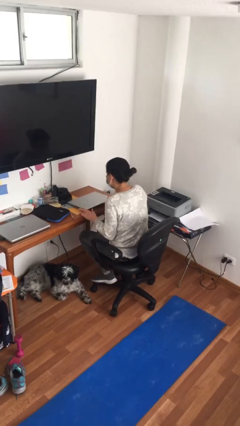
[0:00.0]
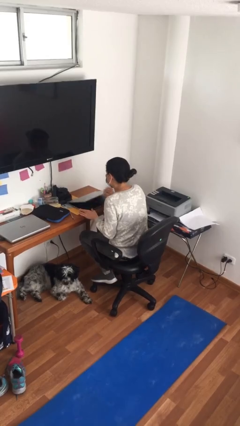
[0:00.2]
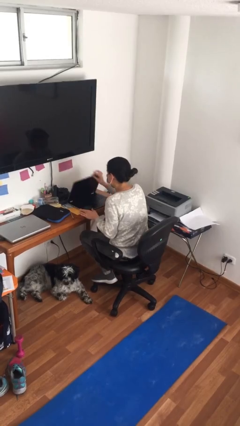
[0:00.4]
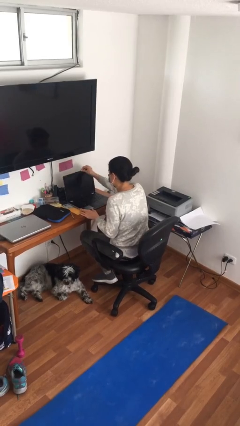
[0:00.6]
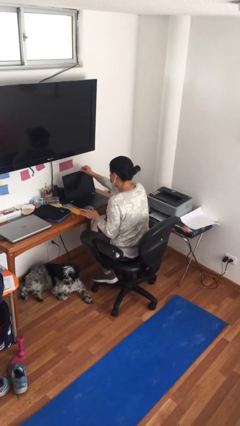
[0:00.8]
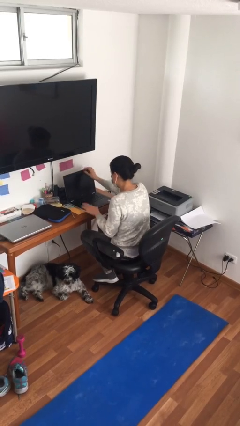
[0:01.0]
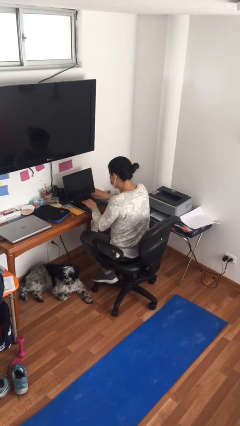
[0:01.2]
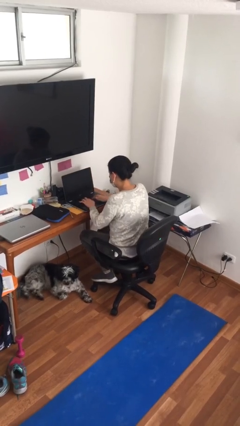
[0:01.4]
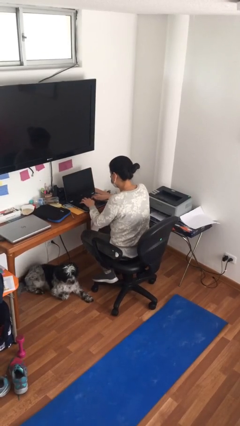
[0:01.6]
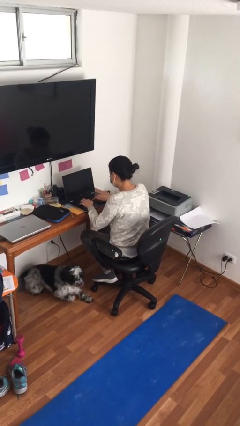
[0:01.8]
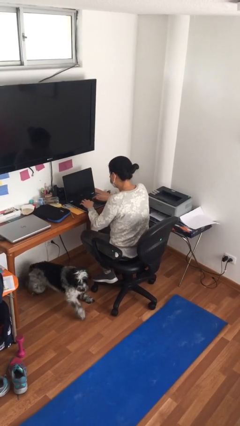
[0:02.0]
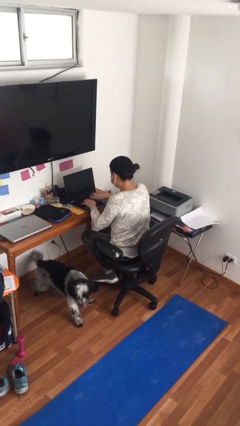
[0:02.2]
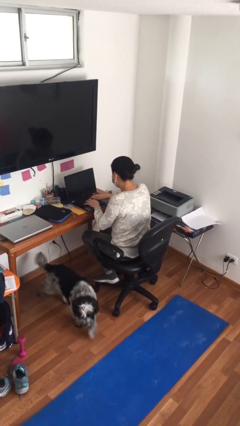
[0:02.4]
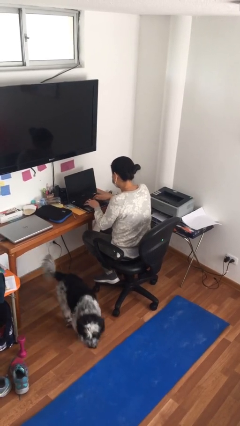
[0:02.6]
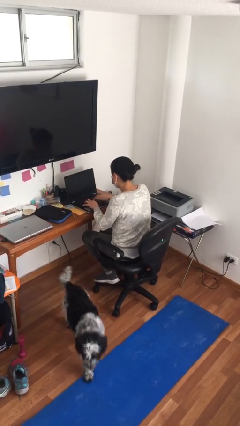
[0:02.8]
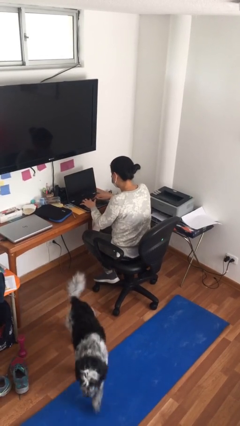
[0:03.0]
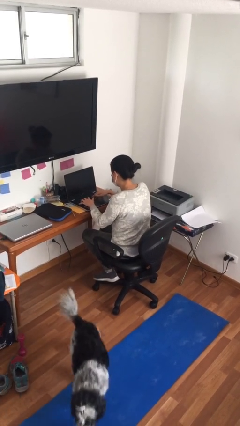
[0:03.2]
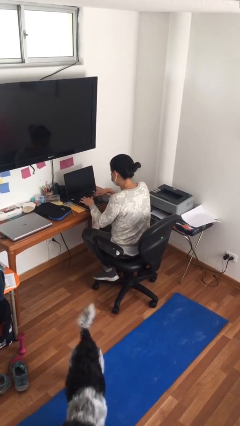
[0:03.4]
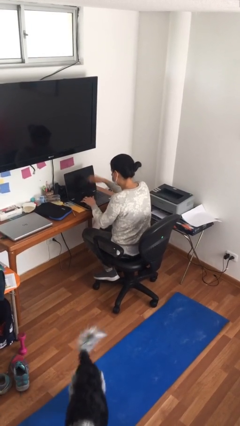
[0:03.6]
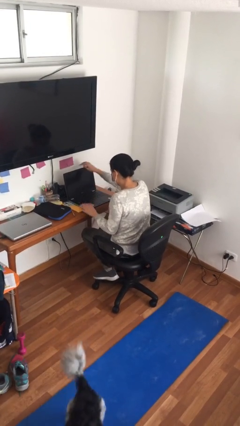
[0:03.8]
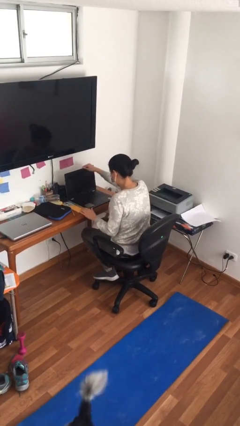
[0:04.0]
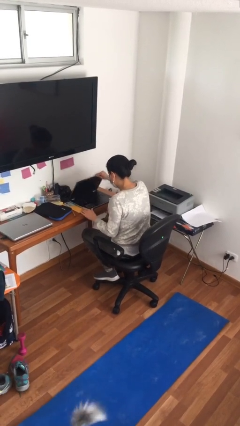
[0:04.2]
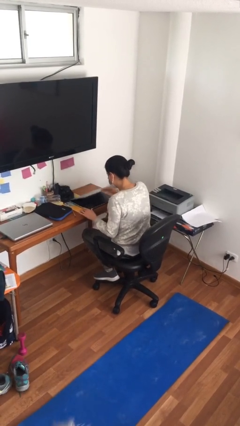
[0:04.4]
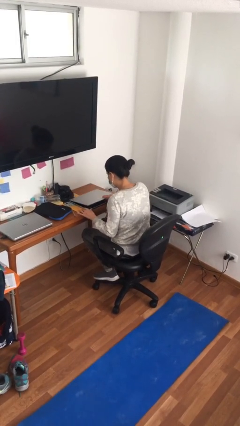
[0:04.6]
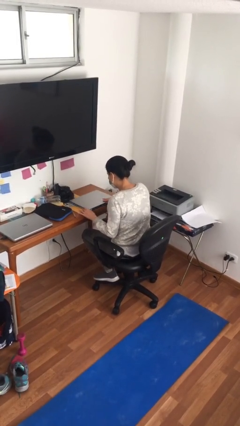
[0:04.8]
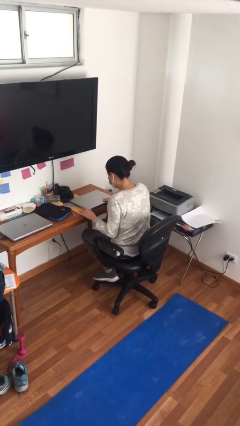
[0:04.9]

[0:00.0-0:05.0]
person interacts with laptop

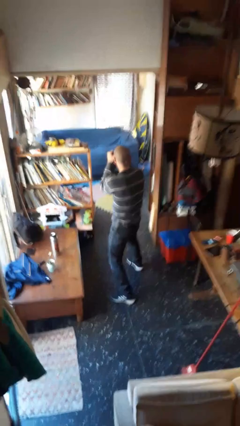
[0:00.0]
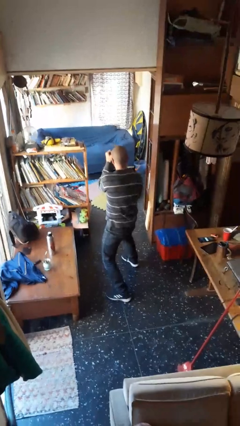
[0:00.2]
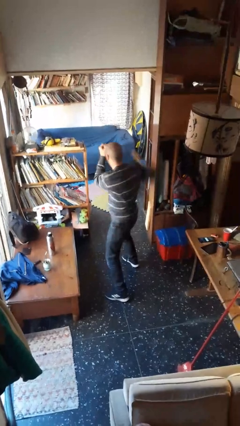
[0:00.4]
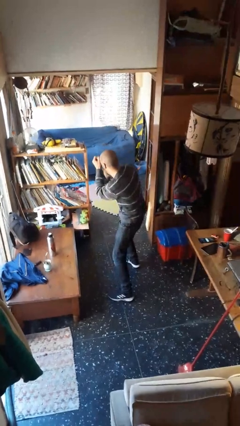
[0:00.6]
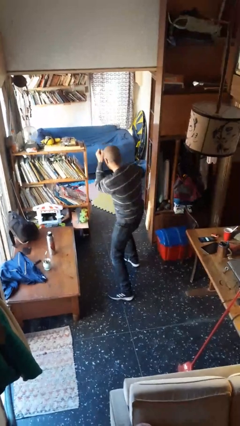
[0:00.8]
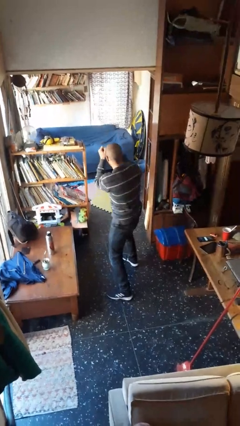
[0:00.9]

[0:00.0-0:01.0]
person punches

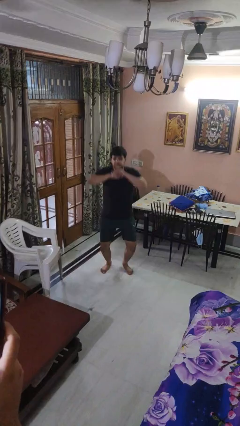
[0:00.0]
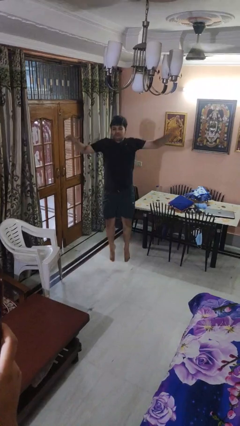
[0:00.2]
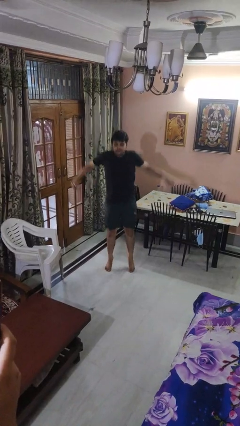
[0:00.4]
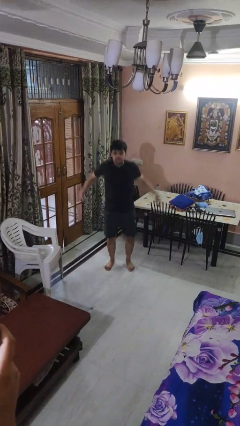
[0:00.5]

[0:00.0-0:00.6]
person jumps

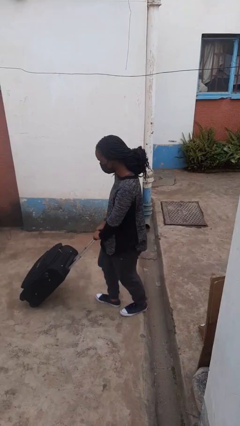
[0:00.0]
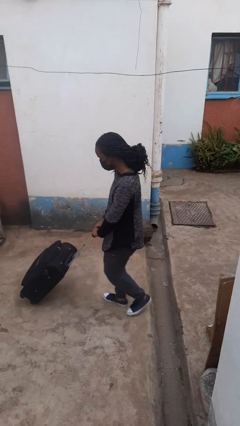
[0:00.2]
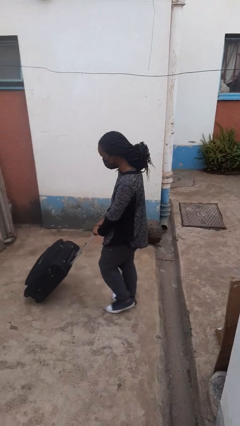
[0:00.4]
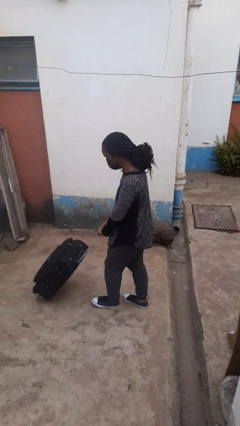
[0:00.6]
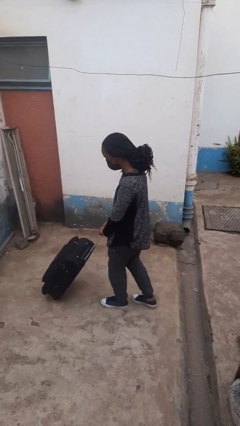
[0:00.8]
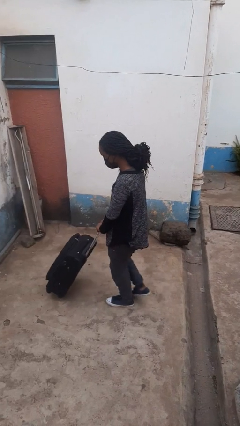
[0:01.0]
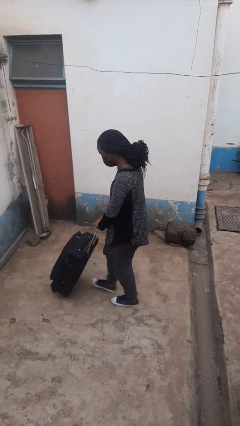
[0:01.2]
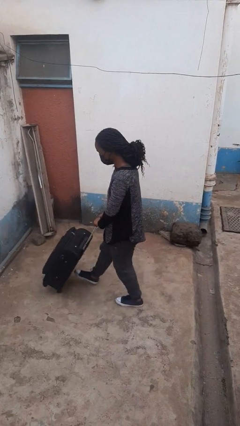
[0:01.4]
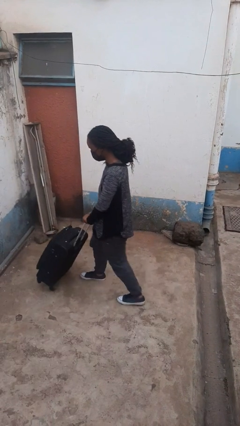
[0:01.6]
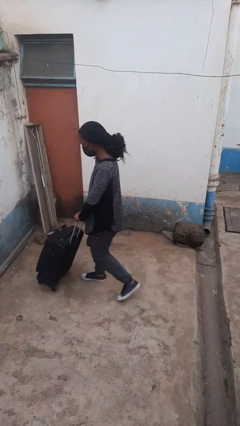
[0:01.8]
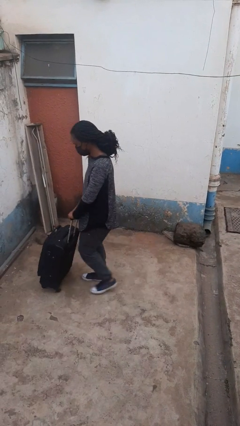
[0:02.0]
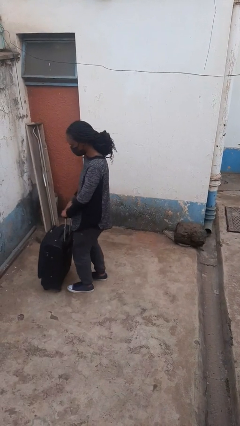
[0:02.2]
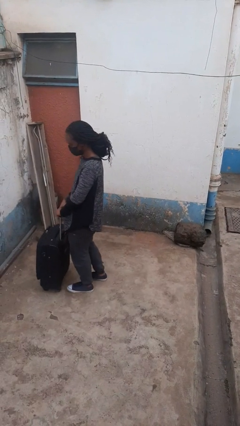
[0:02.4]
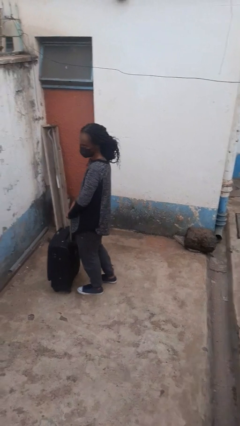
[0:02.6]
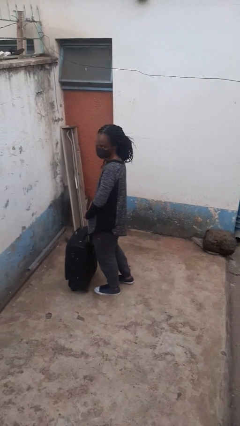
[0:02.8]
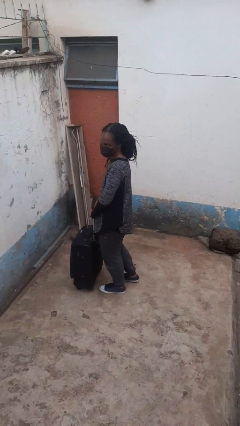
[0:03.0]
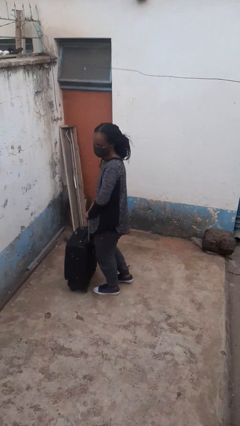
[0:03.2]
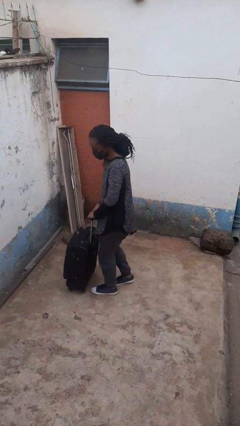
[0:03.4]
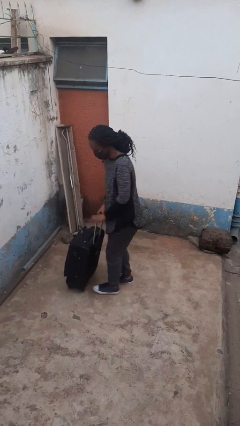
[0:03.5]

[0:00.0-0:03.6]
person pushes wheeled cart

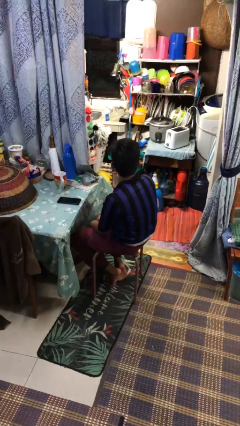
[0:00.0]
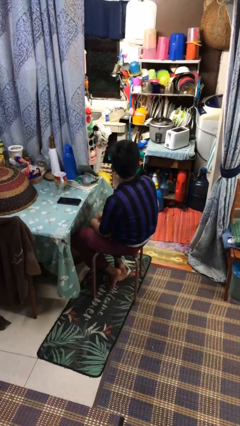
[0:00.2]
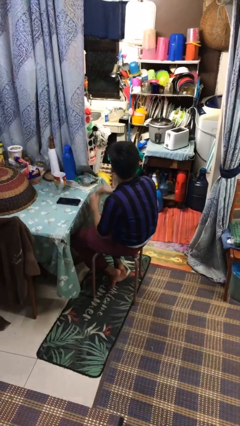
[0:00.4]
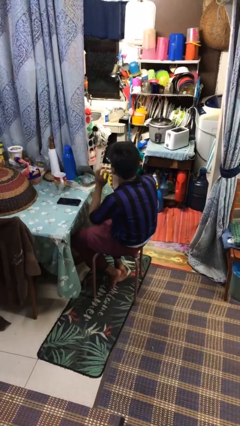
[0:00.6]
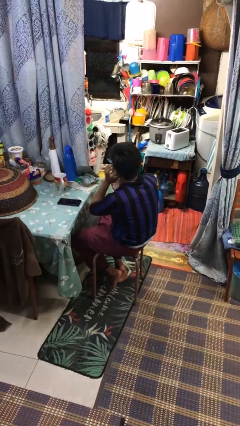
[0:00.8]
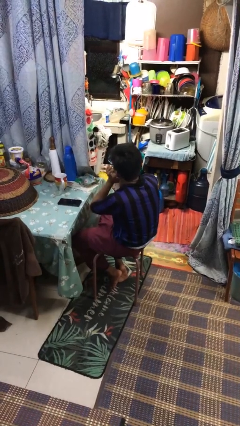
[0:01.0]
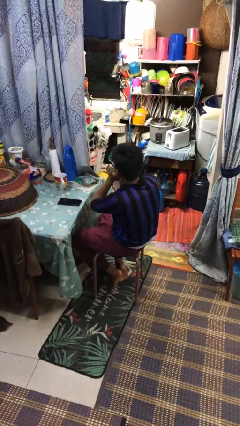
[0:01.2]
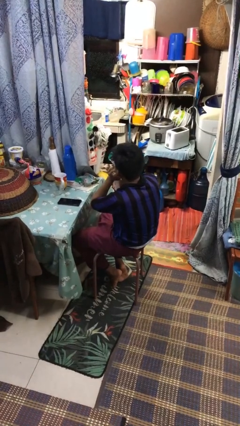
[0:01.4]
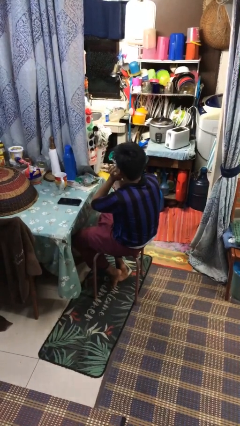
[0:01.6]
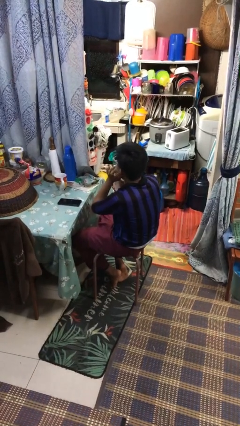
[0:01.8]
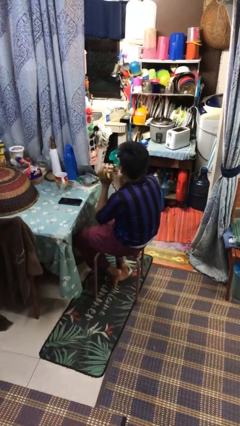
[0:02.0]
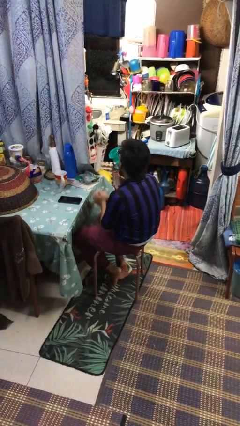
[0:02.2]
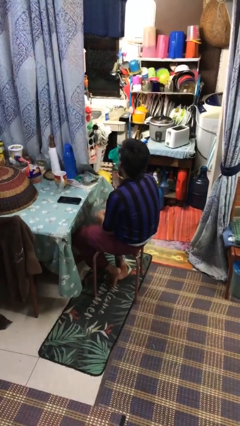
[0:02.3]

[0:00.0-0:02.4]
person puts fingers in ear

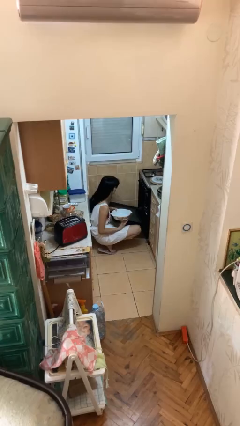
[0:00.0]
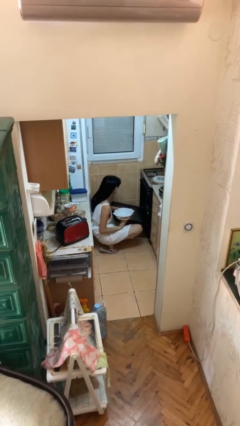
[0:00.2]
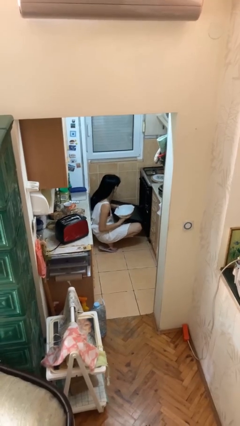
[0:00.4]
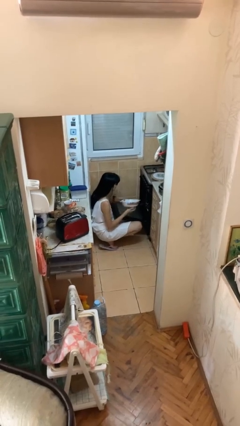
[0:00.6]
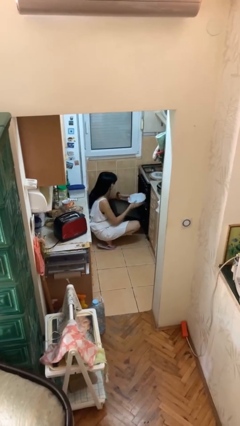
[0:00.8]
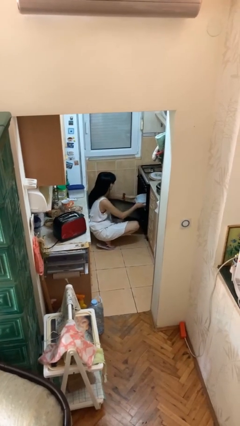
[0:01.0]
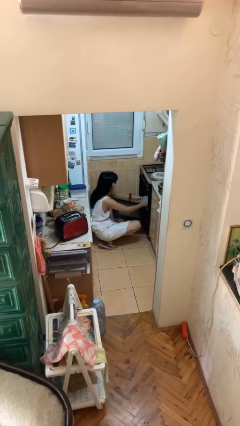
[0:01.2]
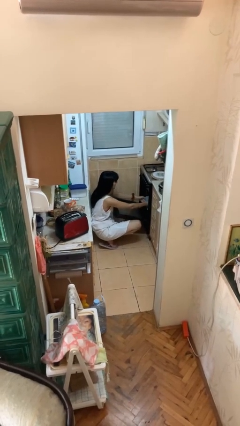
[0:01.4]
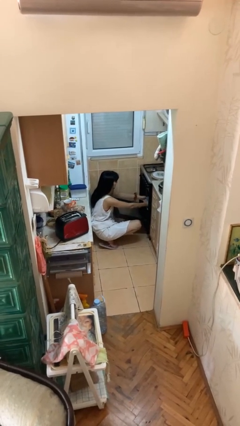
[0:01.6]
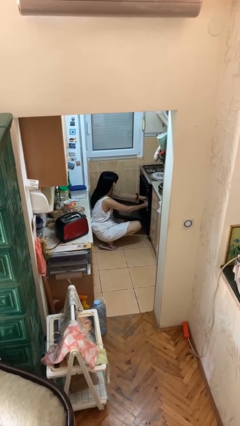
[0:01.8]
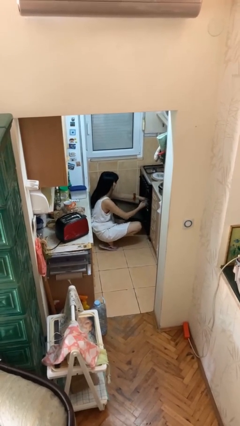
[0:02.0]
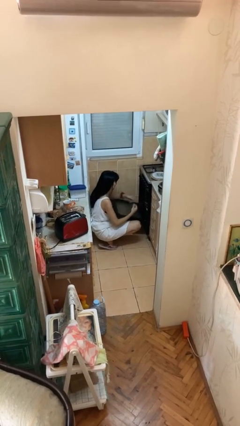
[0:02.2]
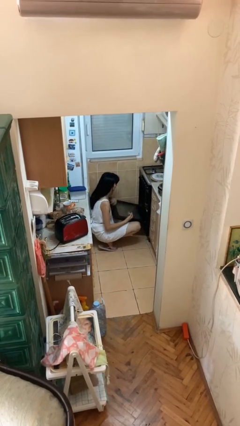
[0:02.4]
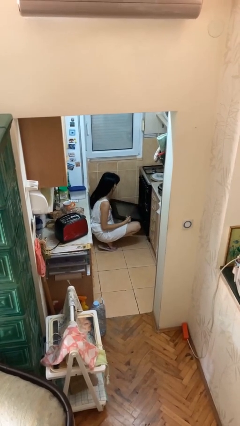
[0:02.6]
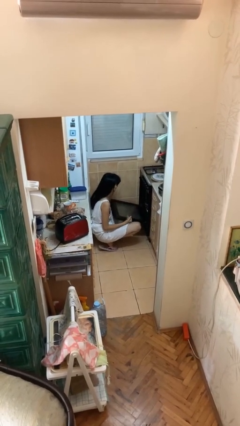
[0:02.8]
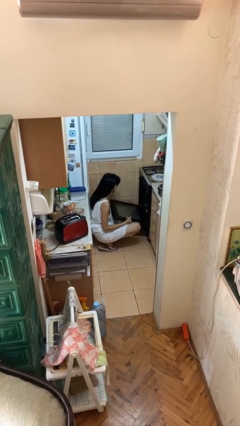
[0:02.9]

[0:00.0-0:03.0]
person puts object into oven

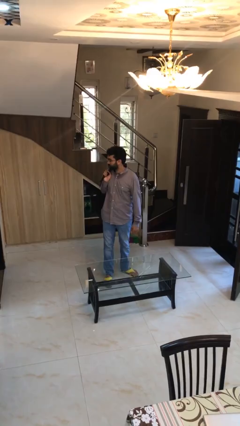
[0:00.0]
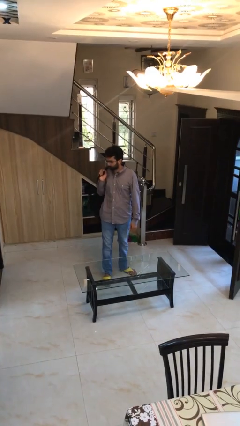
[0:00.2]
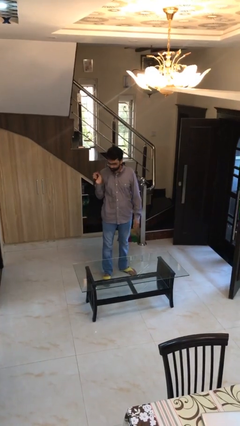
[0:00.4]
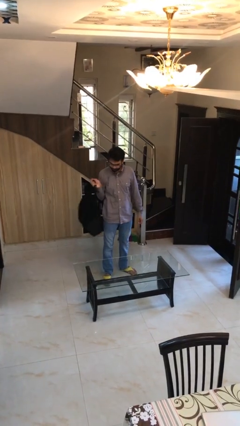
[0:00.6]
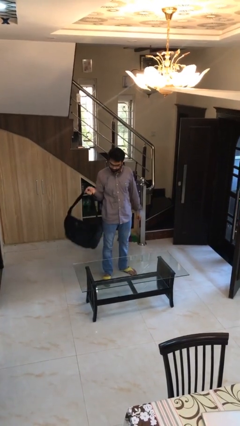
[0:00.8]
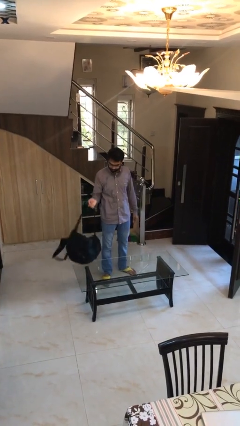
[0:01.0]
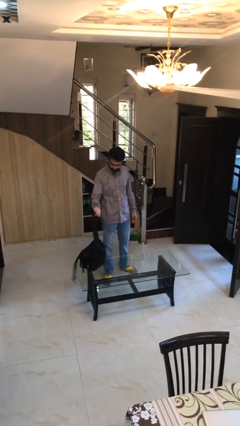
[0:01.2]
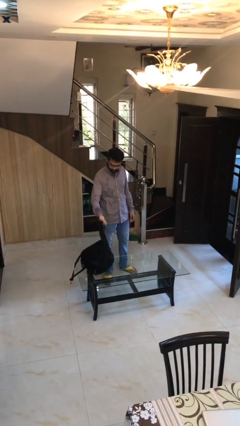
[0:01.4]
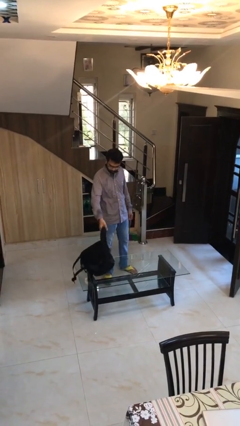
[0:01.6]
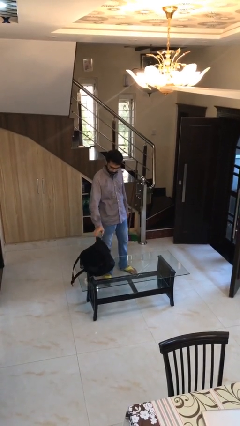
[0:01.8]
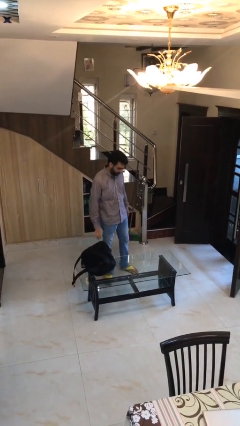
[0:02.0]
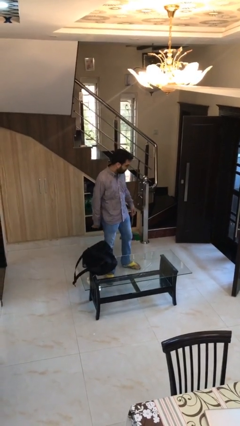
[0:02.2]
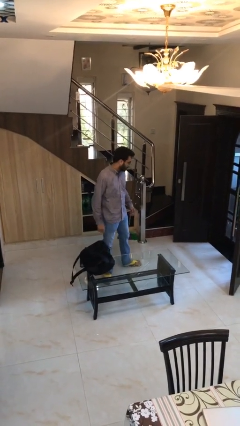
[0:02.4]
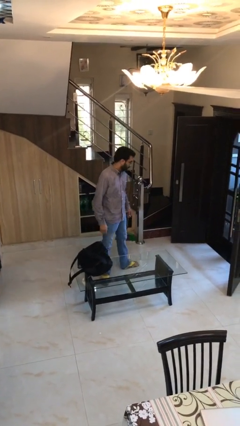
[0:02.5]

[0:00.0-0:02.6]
person puts down object on table
